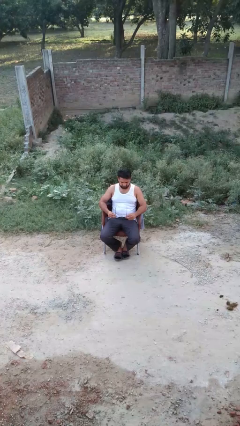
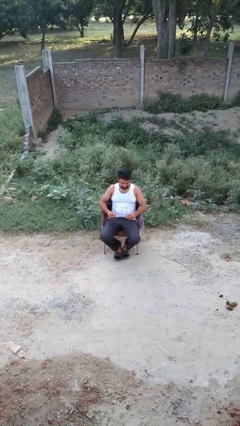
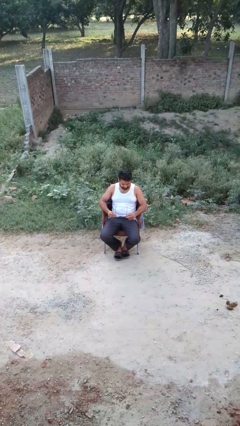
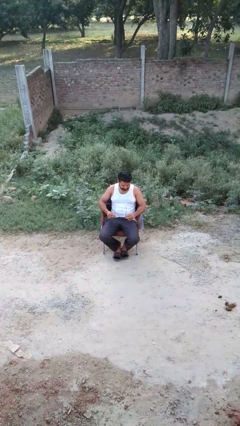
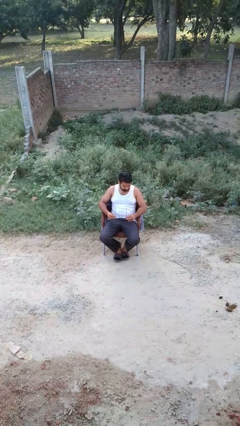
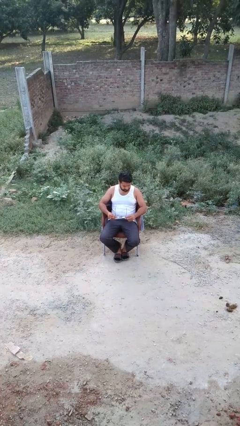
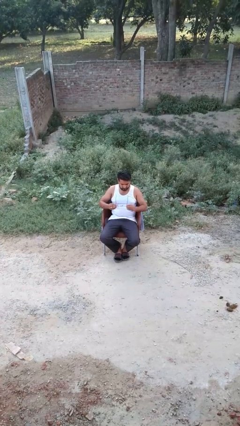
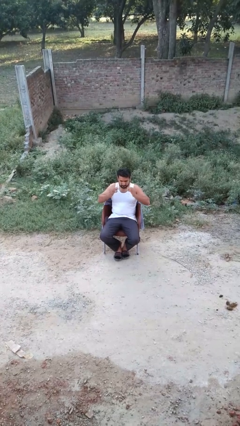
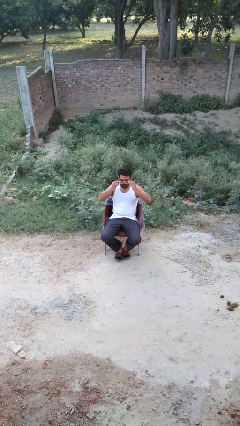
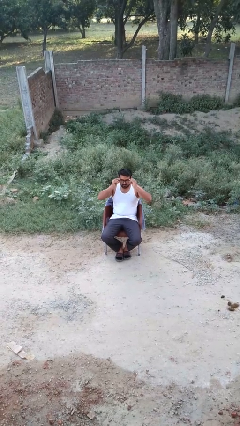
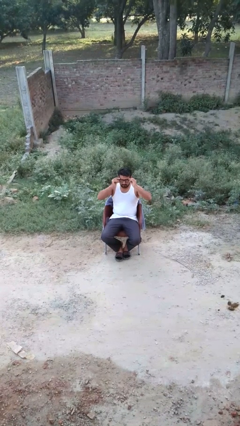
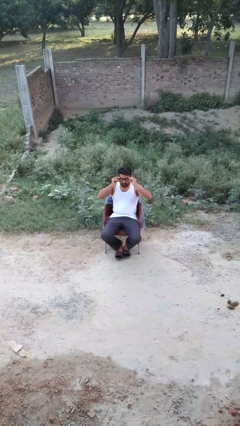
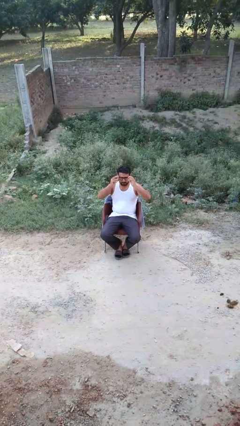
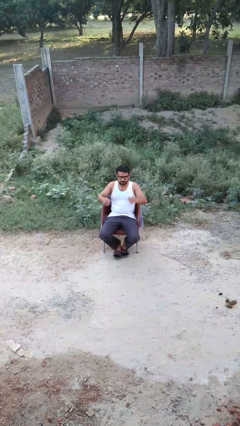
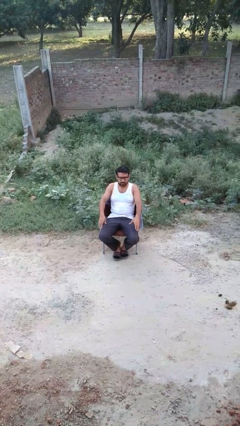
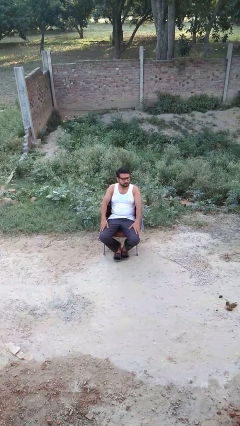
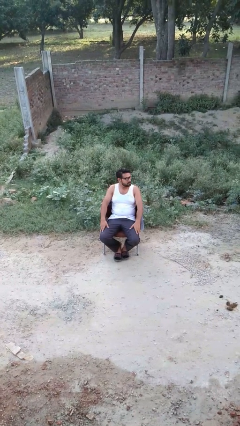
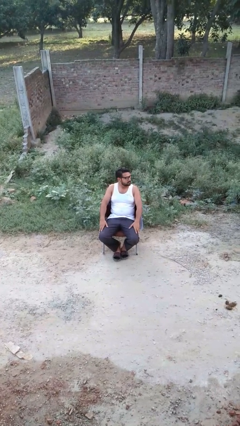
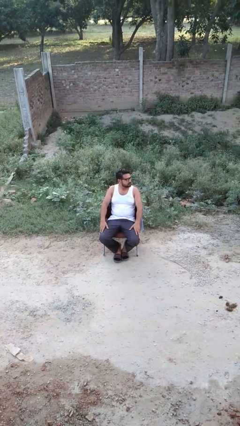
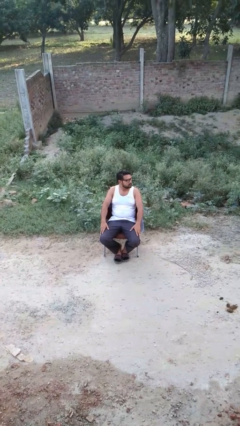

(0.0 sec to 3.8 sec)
person puts on glasses

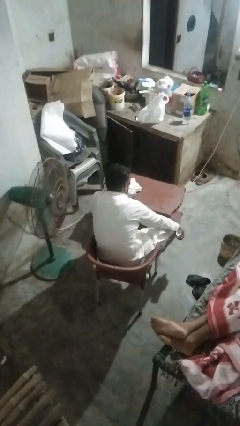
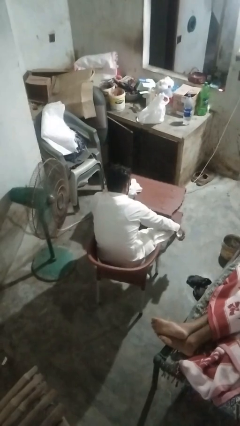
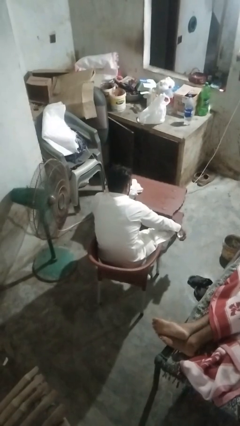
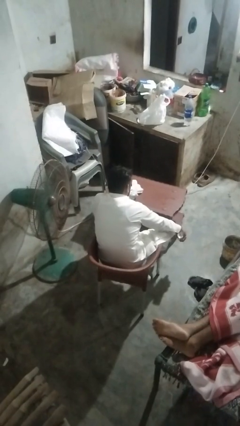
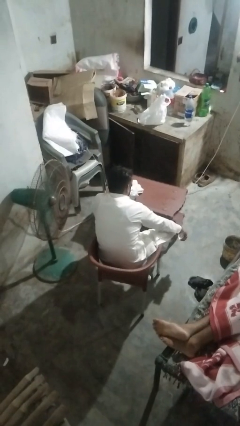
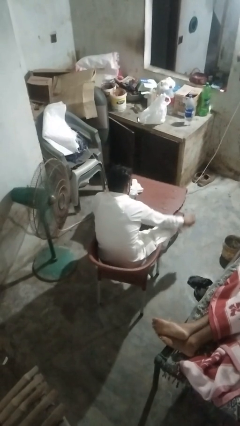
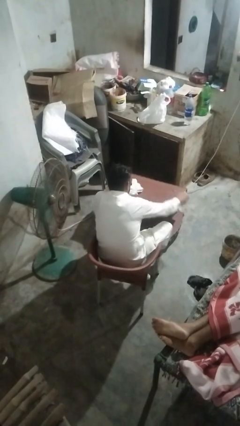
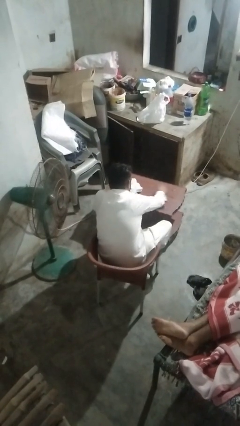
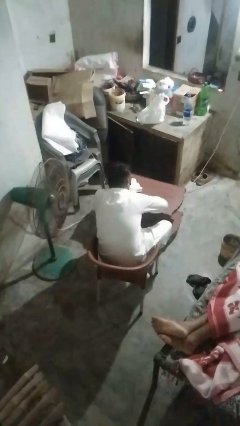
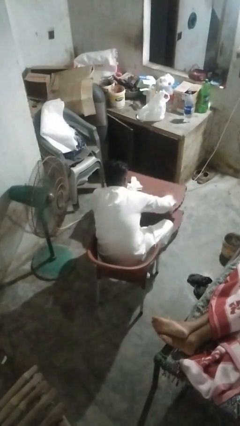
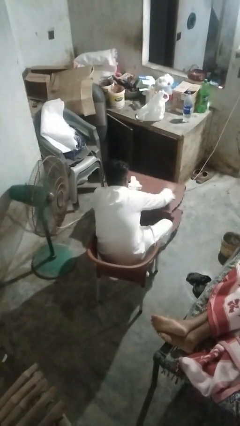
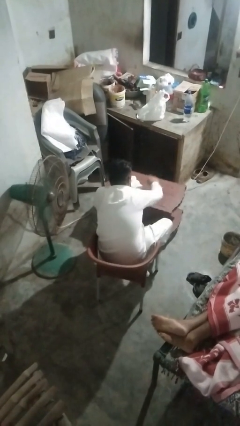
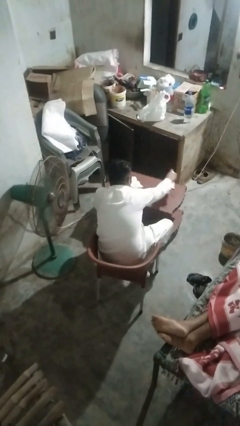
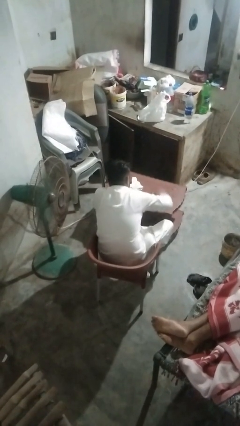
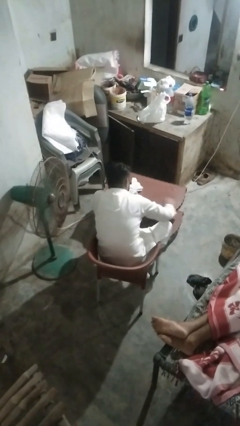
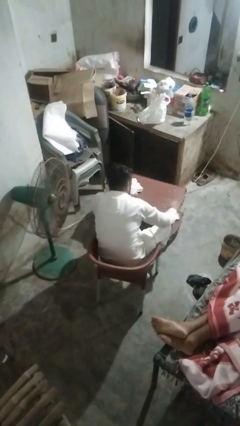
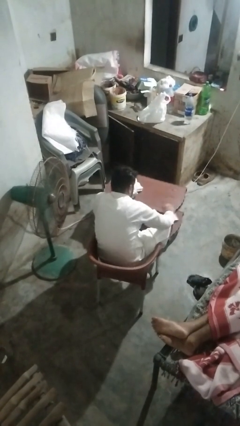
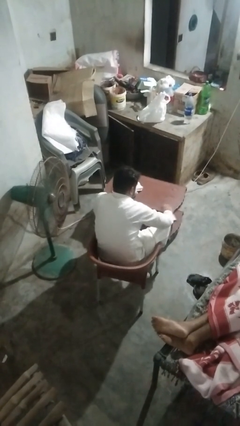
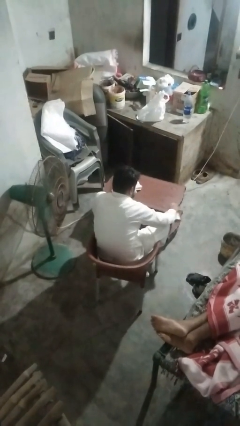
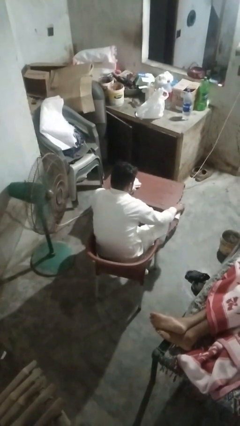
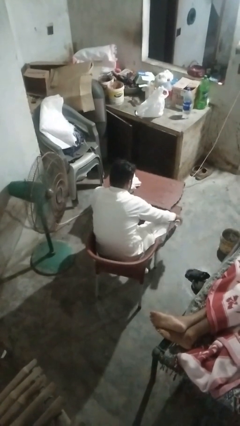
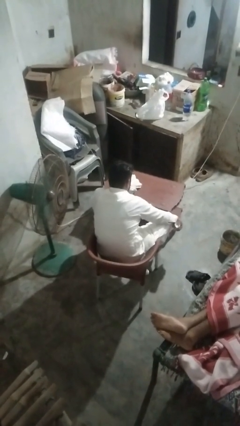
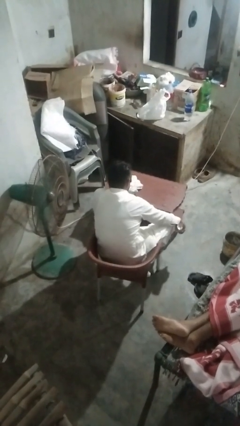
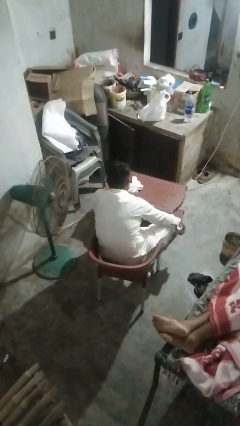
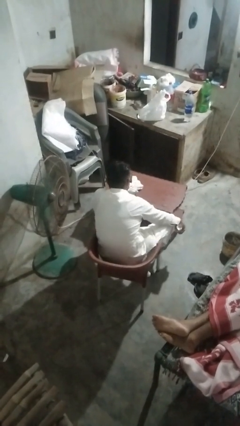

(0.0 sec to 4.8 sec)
person sprays from bottle

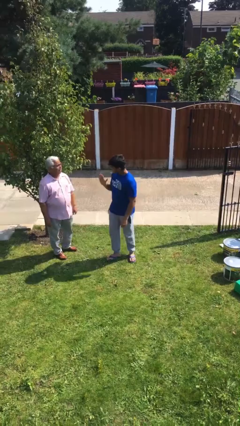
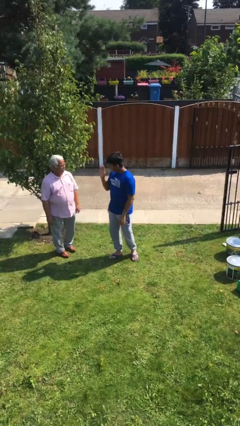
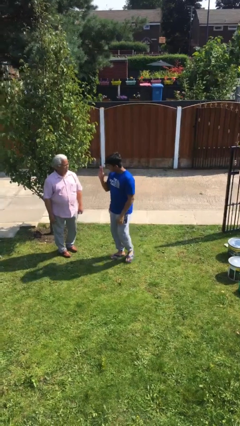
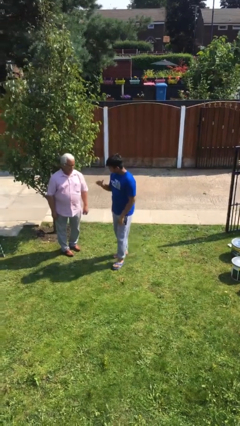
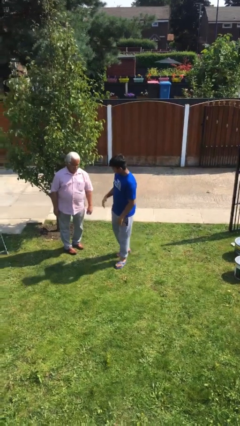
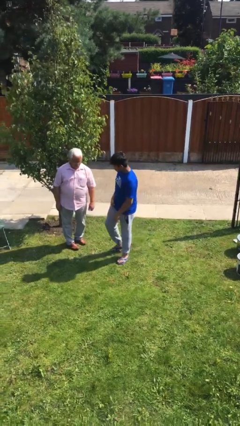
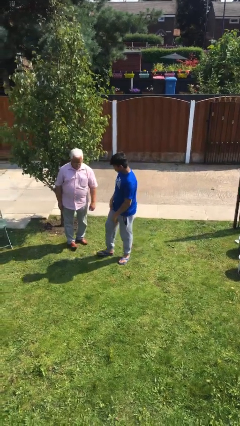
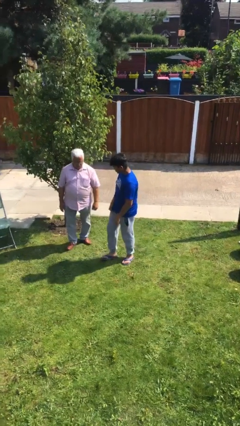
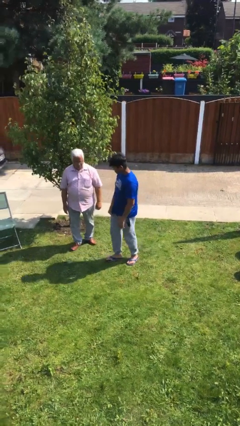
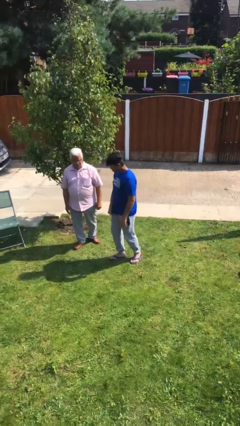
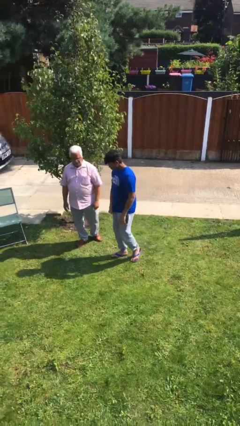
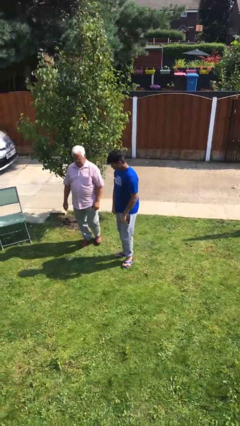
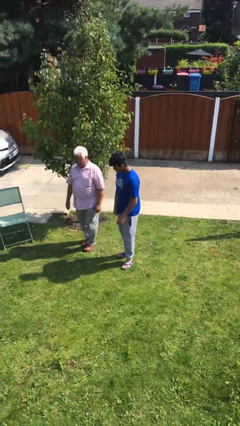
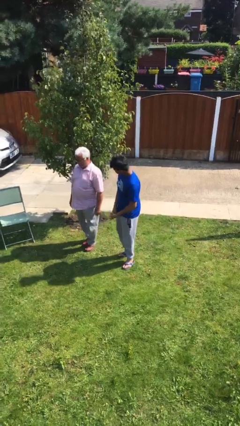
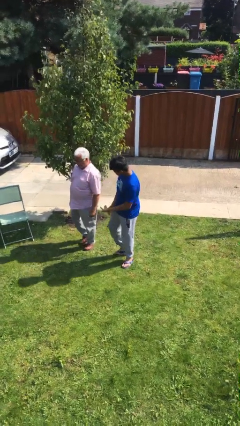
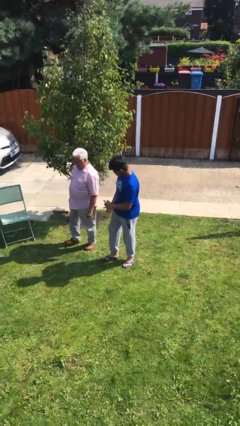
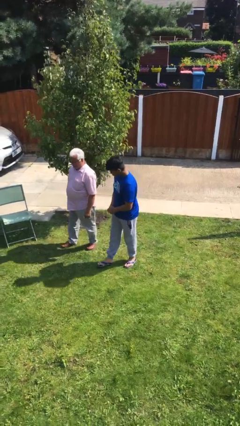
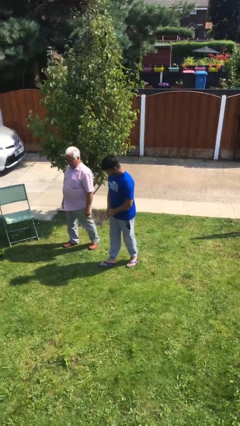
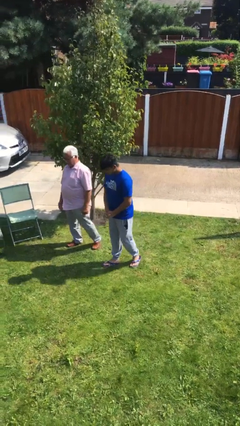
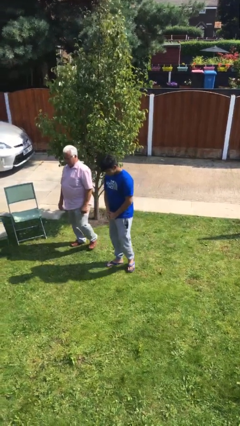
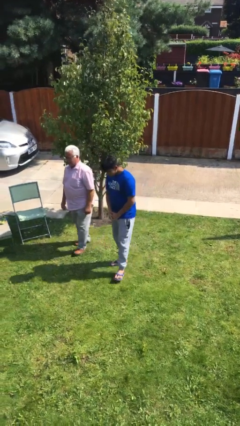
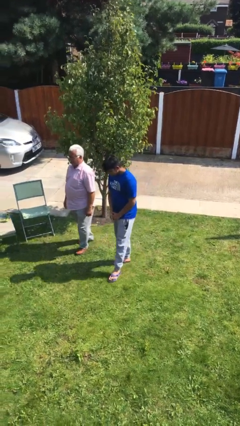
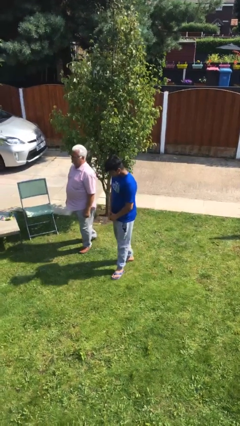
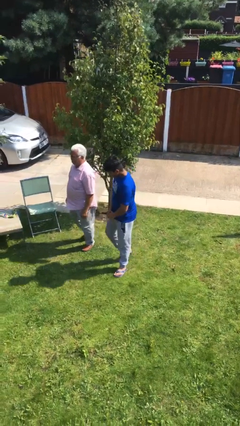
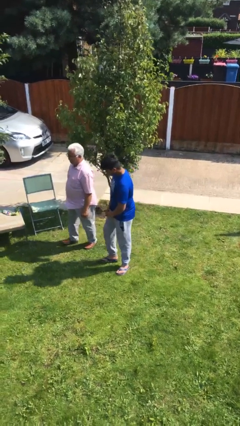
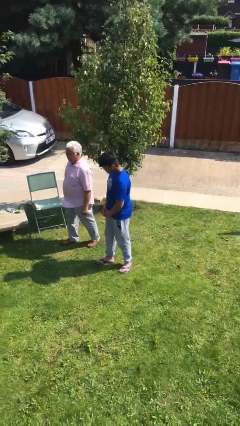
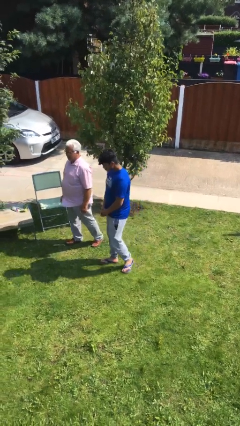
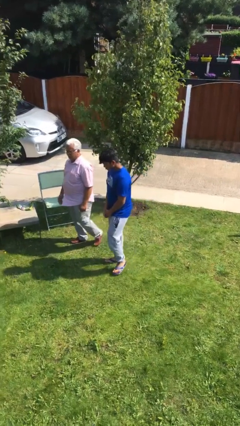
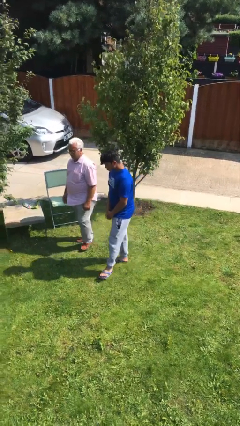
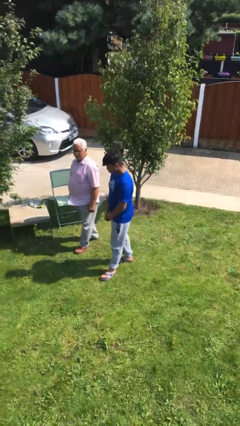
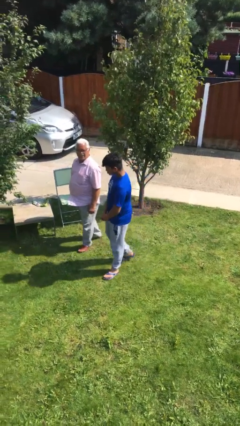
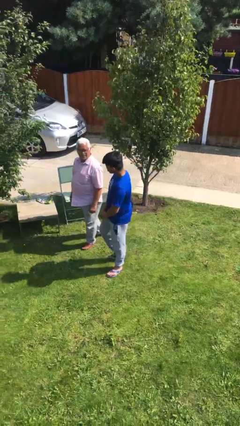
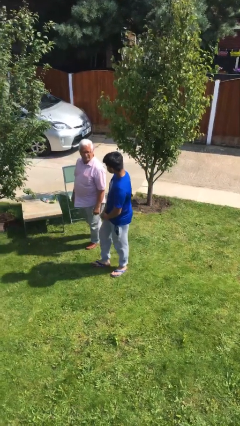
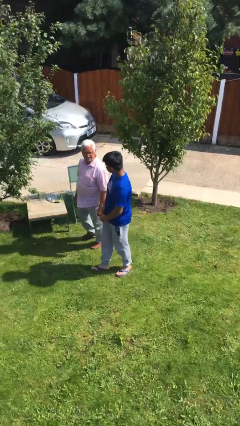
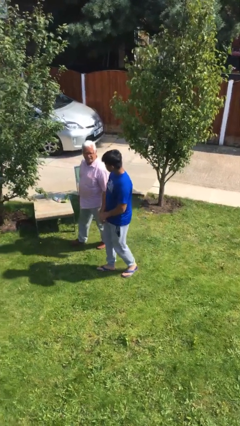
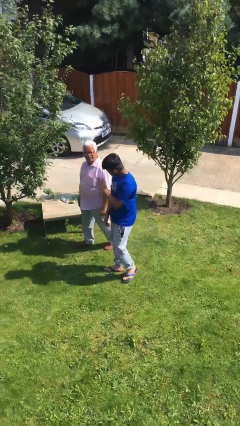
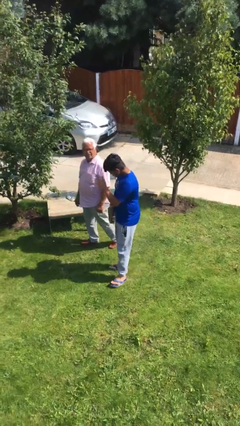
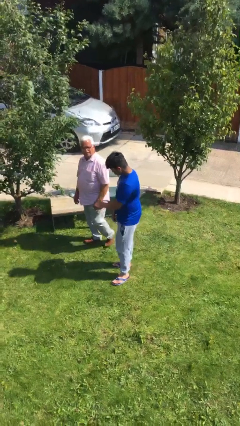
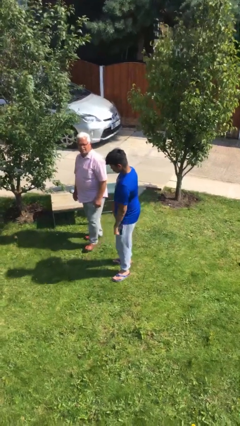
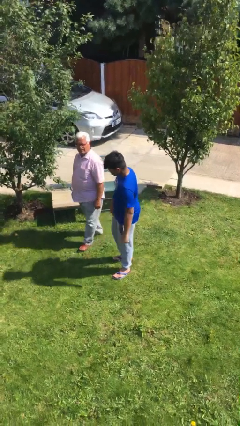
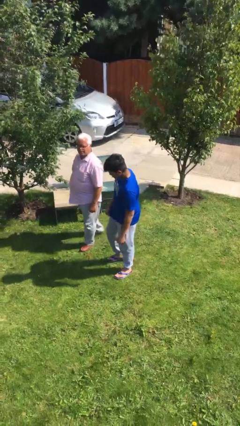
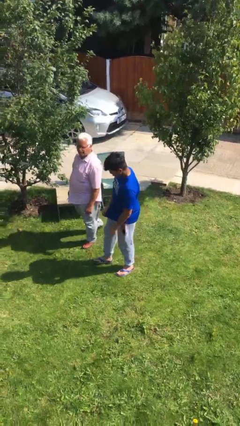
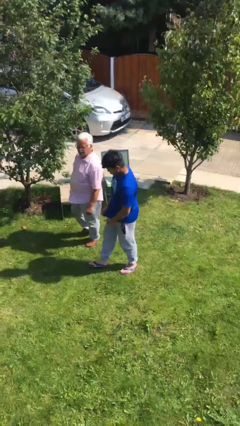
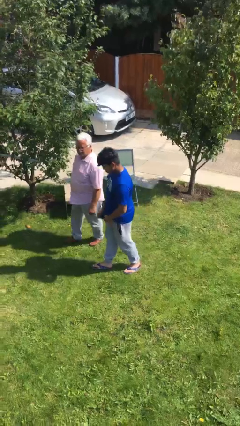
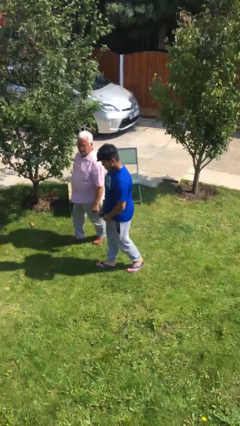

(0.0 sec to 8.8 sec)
person talks to person

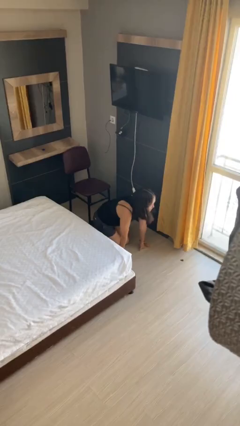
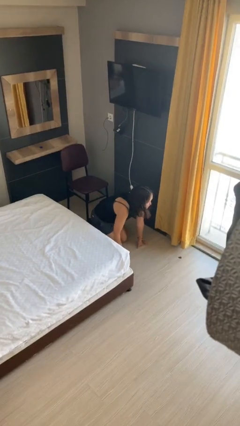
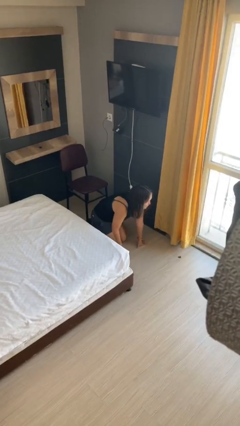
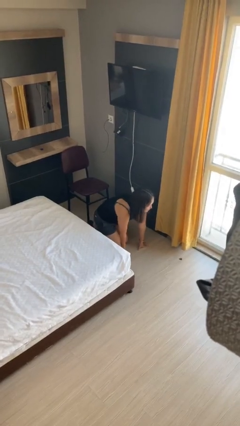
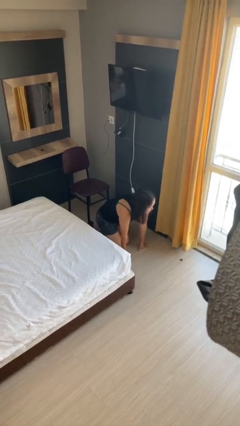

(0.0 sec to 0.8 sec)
person stands up from floor
